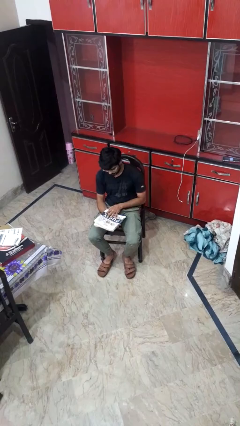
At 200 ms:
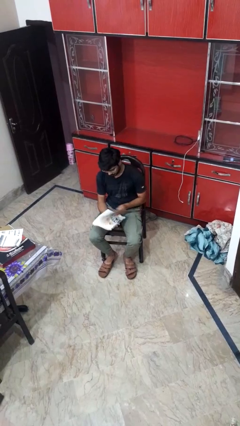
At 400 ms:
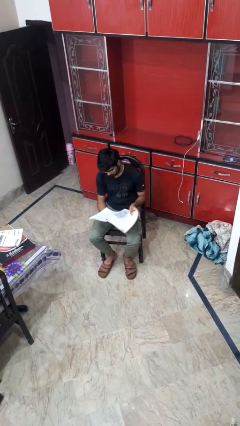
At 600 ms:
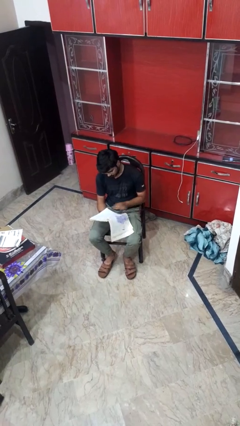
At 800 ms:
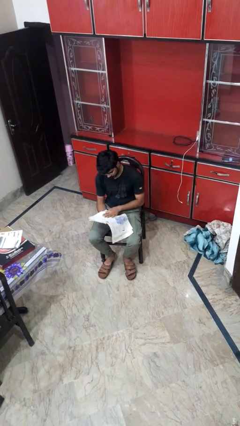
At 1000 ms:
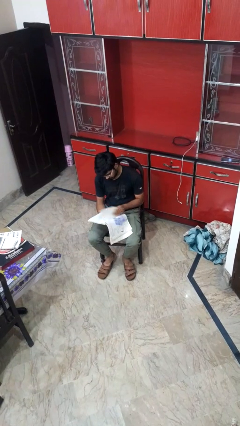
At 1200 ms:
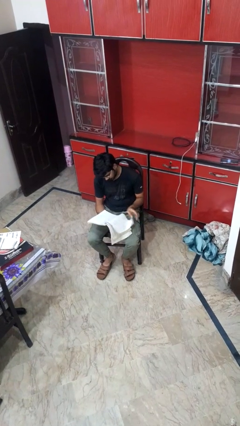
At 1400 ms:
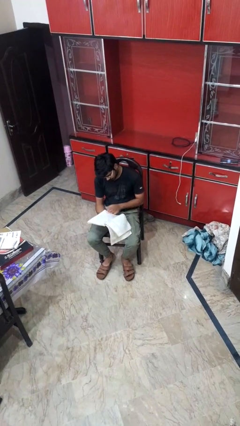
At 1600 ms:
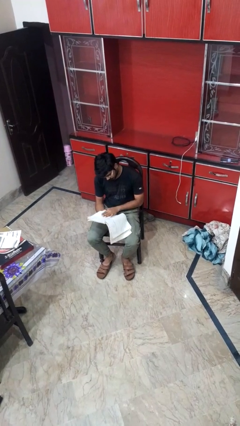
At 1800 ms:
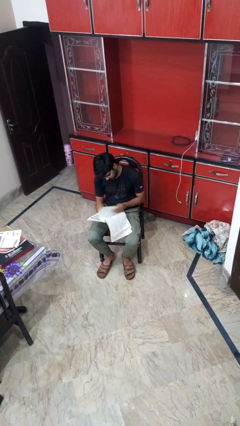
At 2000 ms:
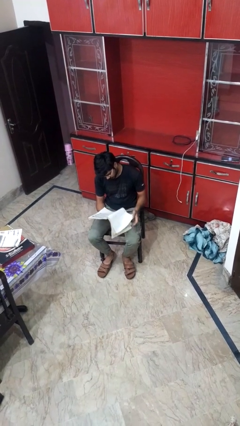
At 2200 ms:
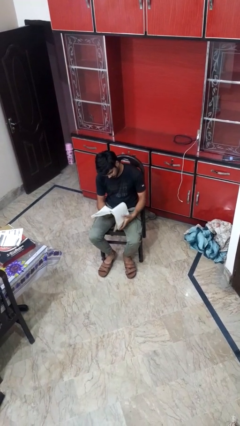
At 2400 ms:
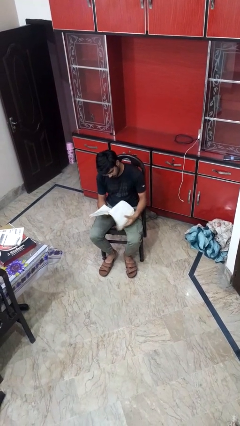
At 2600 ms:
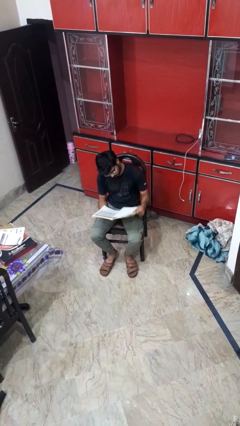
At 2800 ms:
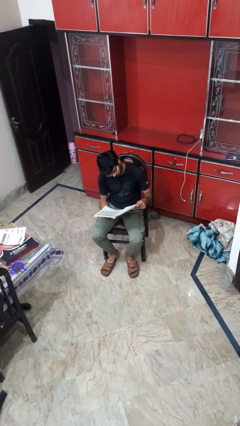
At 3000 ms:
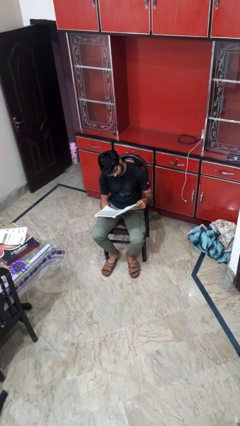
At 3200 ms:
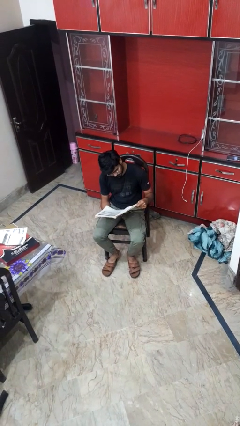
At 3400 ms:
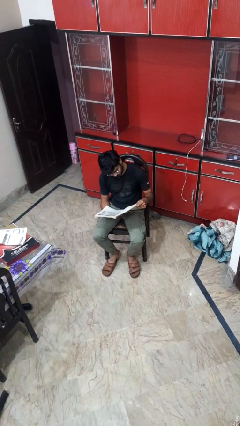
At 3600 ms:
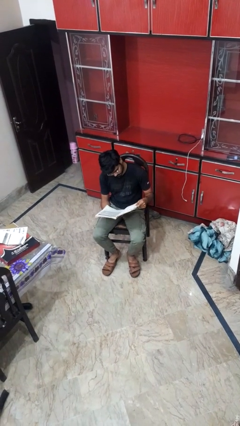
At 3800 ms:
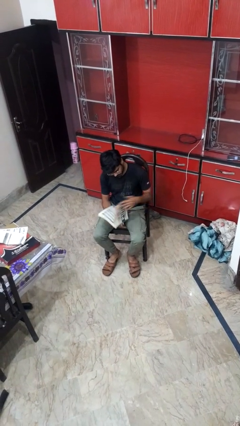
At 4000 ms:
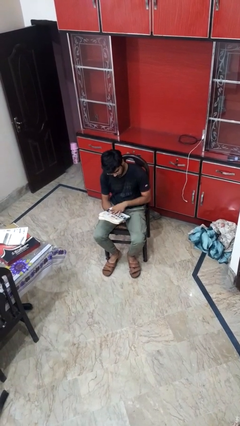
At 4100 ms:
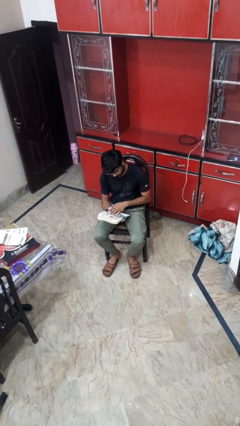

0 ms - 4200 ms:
person reads magazine

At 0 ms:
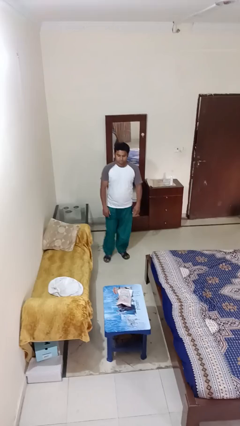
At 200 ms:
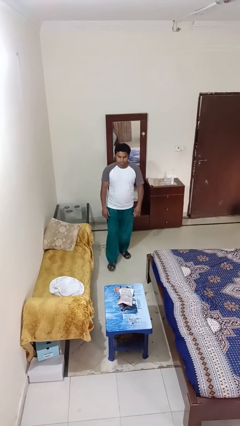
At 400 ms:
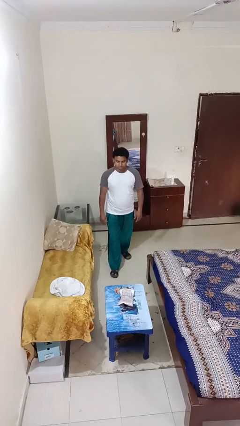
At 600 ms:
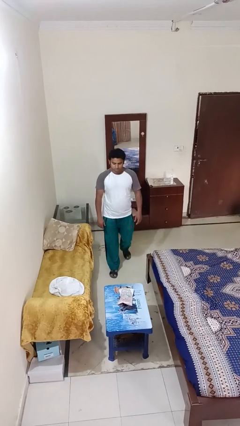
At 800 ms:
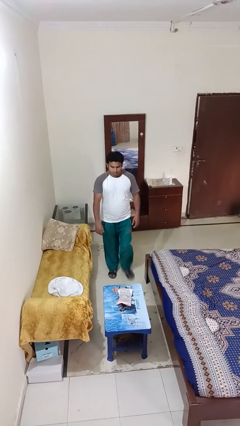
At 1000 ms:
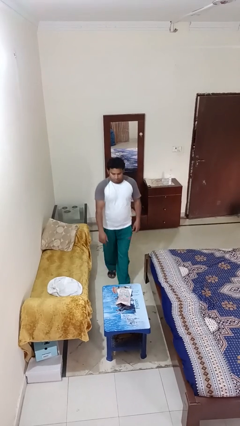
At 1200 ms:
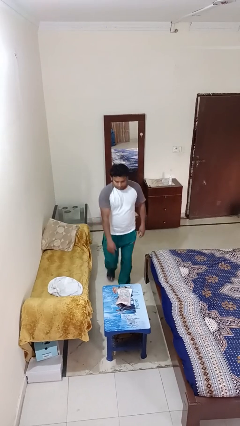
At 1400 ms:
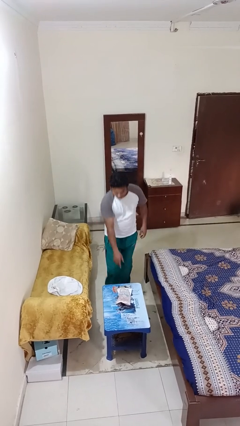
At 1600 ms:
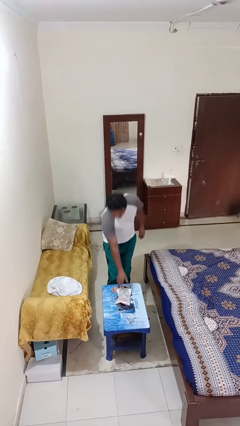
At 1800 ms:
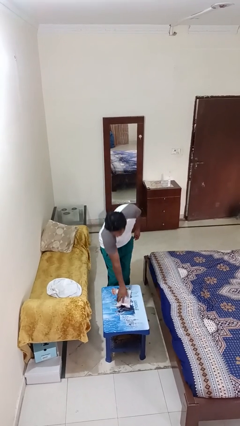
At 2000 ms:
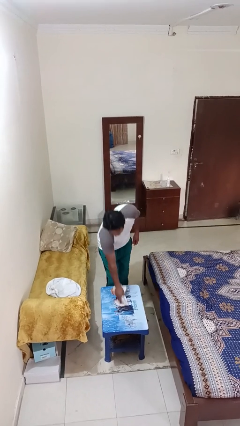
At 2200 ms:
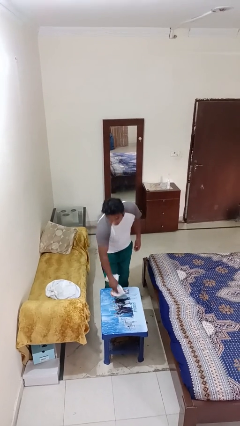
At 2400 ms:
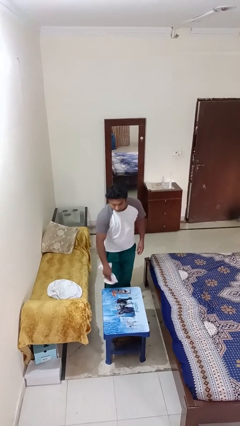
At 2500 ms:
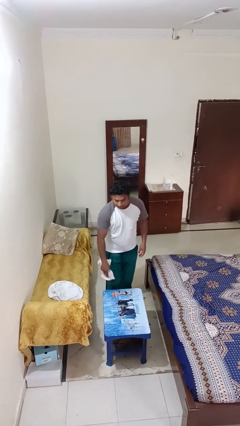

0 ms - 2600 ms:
person picks up object from table

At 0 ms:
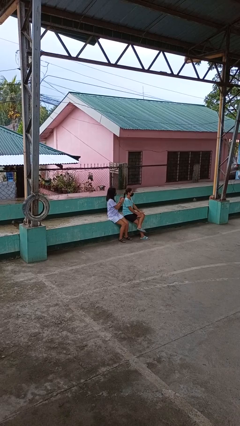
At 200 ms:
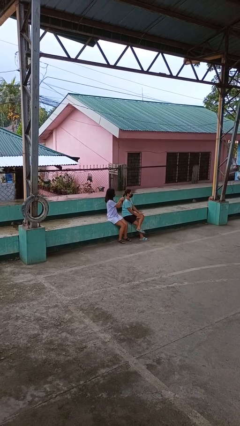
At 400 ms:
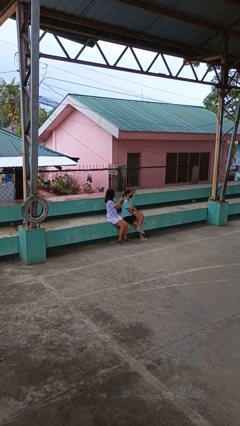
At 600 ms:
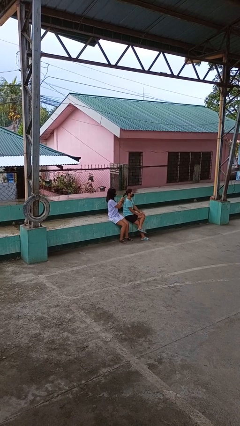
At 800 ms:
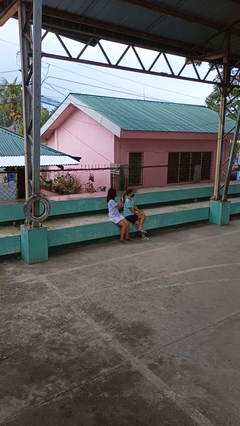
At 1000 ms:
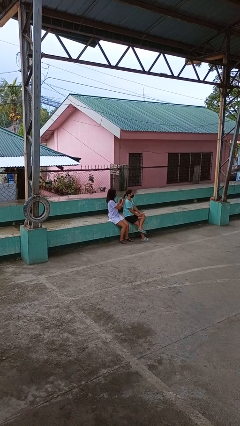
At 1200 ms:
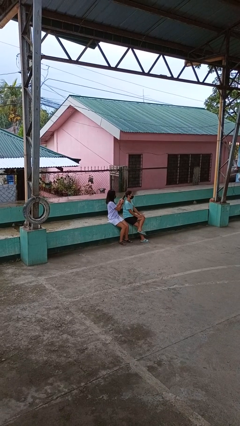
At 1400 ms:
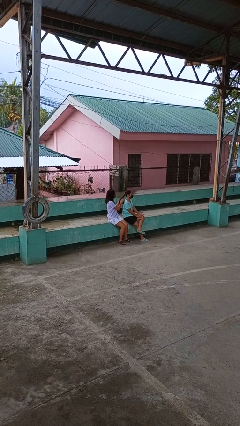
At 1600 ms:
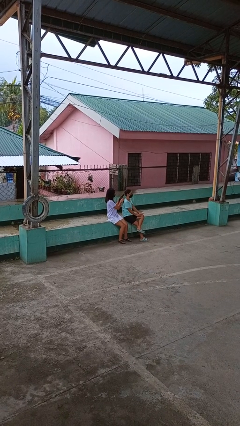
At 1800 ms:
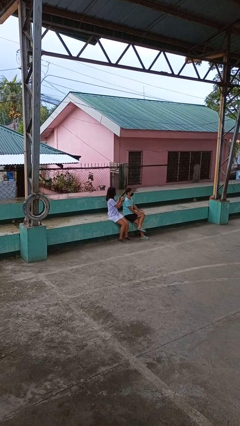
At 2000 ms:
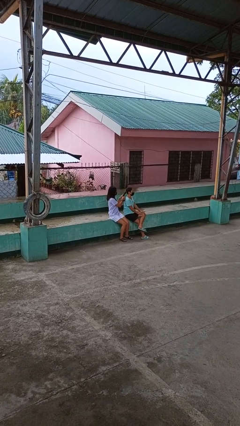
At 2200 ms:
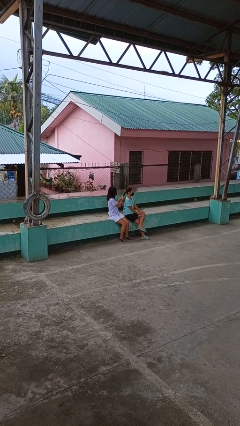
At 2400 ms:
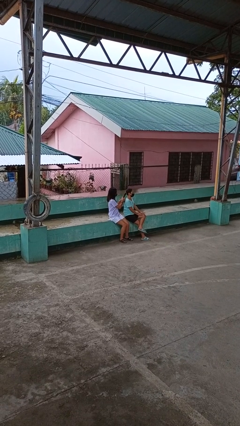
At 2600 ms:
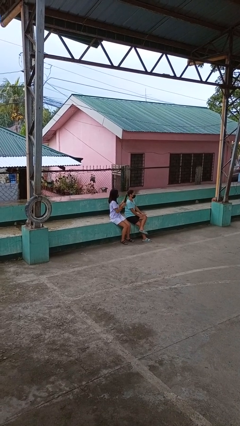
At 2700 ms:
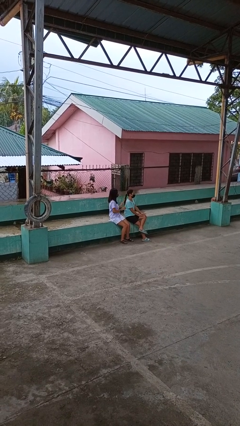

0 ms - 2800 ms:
person braids hair of person

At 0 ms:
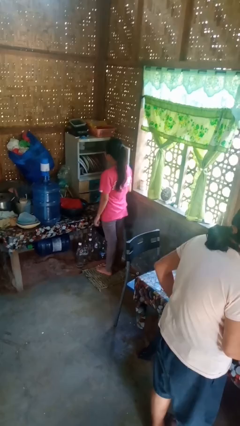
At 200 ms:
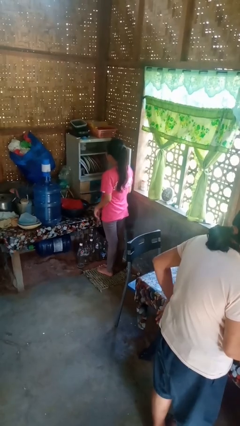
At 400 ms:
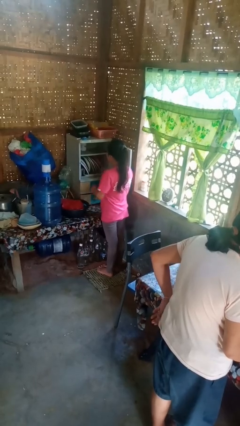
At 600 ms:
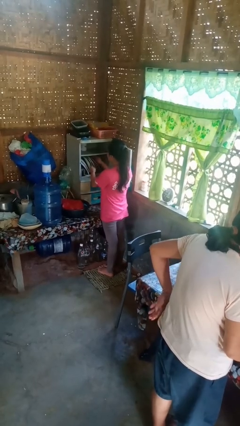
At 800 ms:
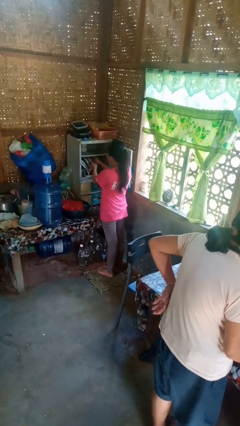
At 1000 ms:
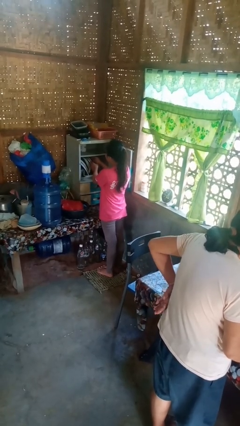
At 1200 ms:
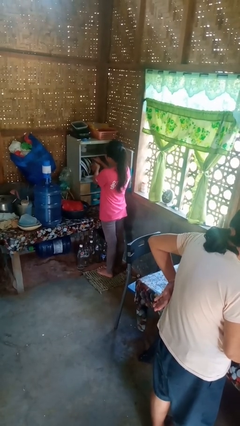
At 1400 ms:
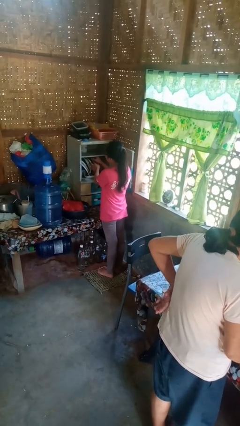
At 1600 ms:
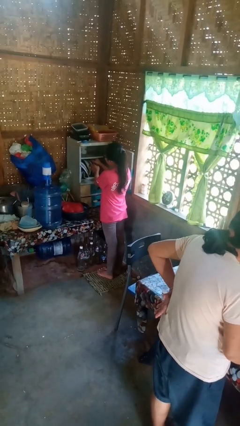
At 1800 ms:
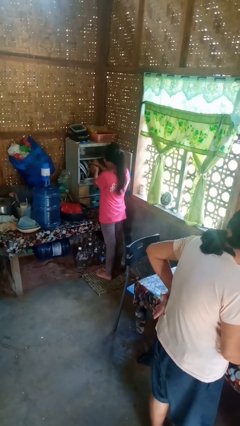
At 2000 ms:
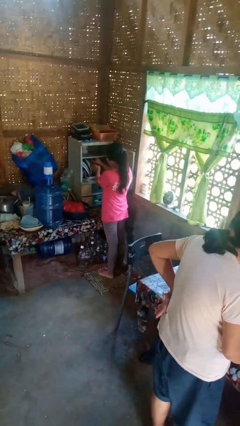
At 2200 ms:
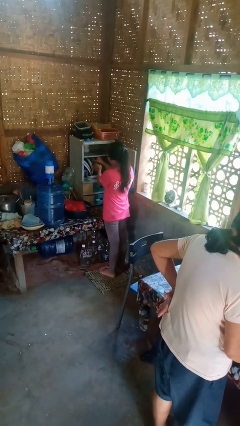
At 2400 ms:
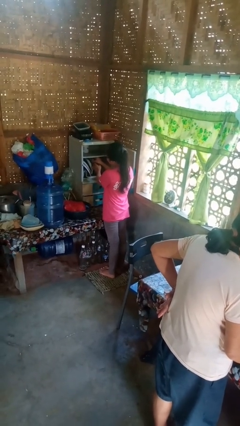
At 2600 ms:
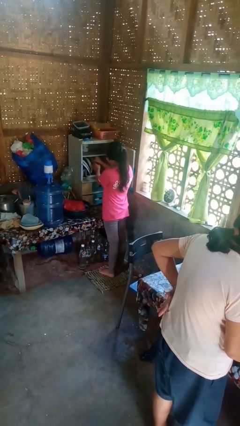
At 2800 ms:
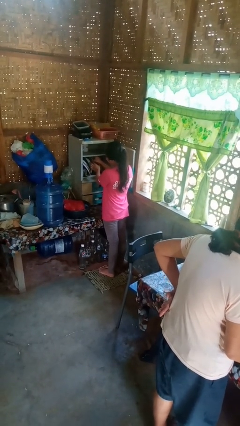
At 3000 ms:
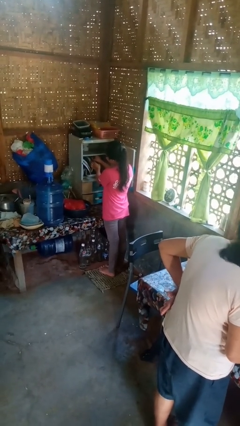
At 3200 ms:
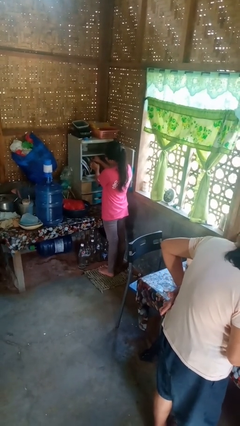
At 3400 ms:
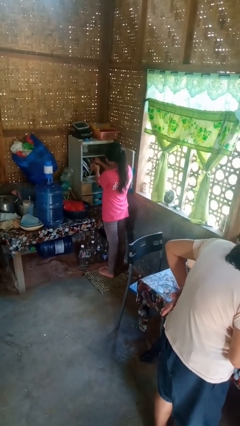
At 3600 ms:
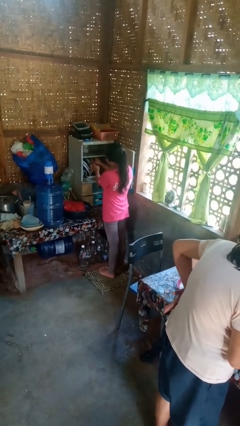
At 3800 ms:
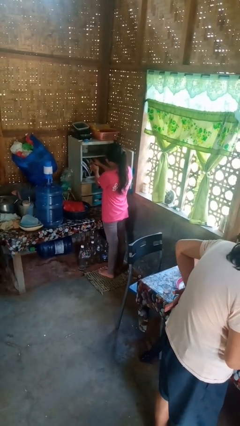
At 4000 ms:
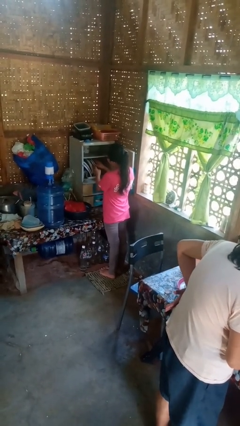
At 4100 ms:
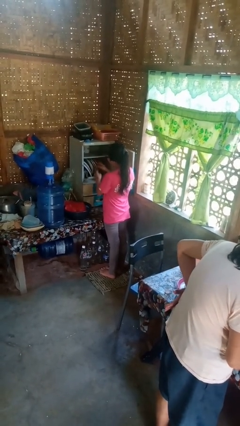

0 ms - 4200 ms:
person searches in cabinet

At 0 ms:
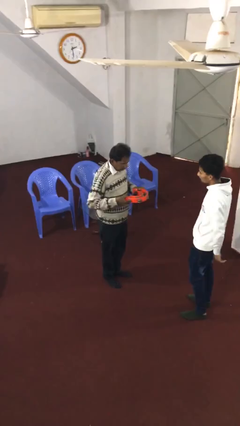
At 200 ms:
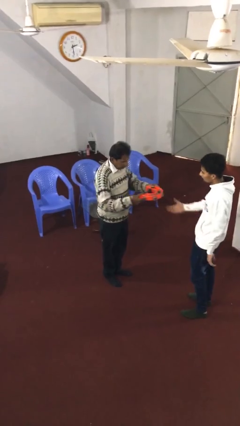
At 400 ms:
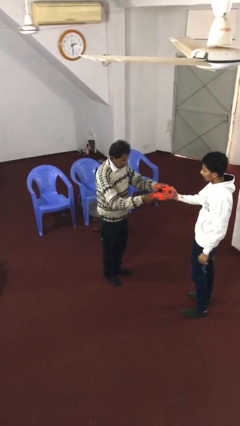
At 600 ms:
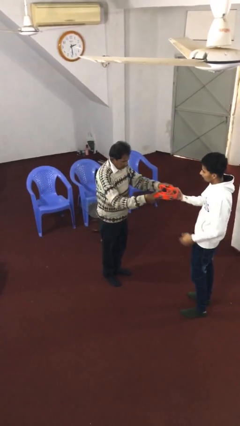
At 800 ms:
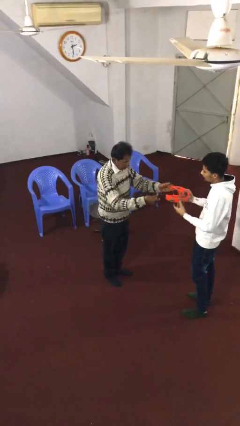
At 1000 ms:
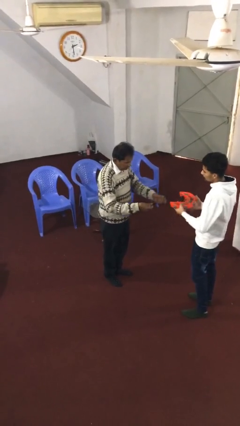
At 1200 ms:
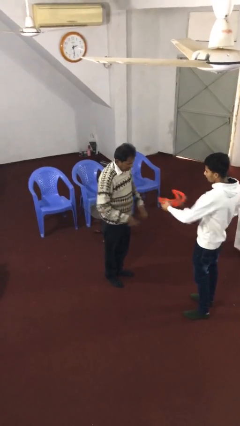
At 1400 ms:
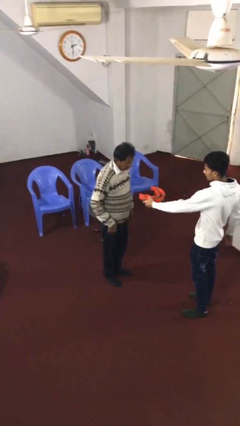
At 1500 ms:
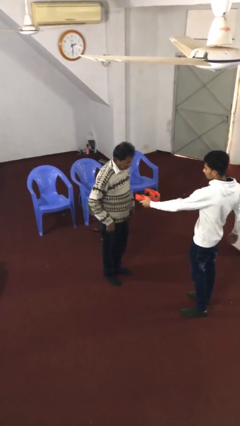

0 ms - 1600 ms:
person transfers object to person

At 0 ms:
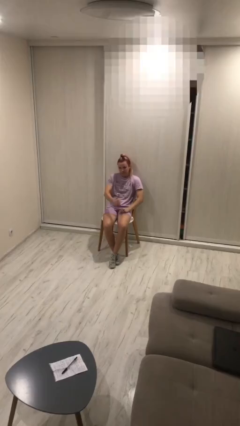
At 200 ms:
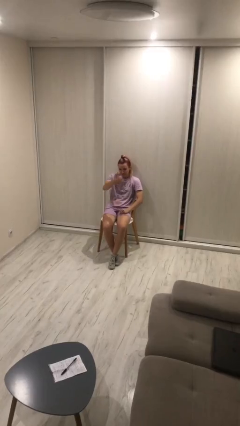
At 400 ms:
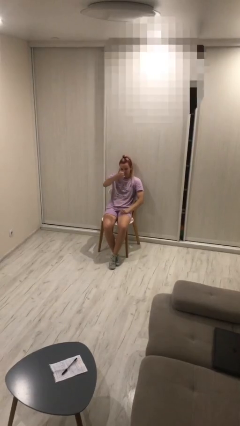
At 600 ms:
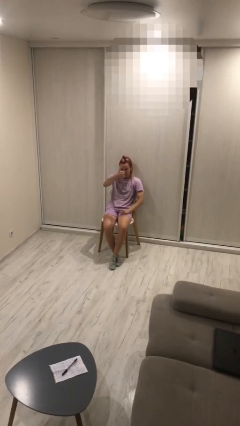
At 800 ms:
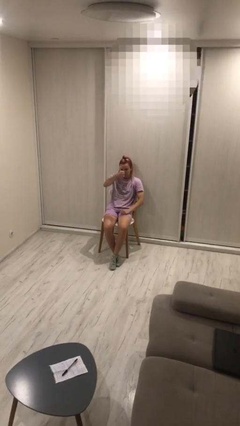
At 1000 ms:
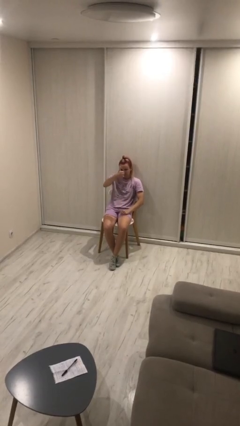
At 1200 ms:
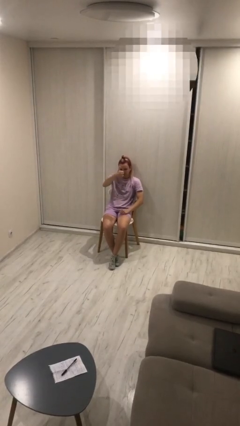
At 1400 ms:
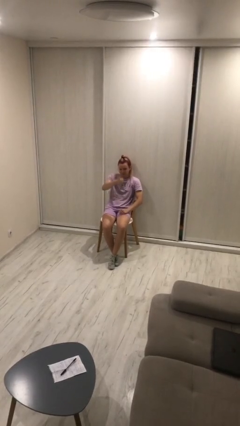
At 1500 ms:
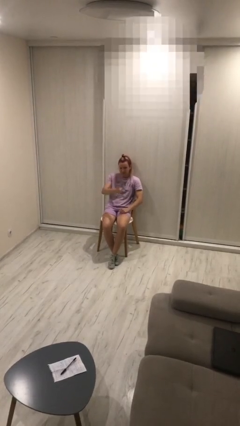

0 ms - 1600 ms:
person gestures thumbs up
